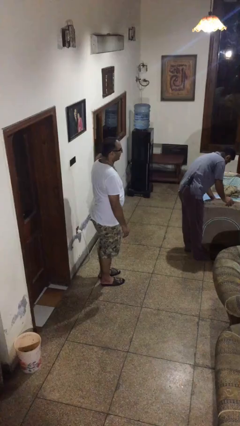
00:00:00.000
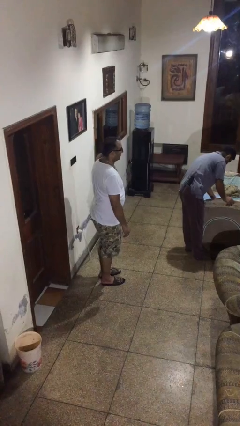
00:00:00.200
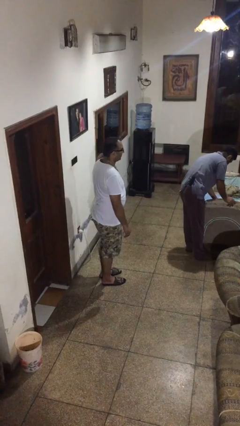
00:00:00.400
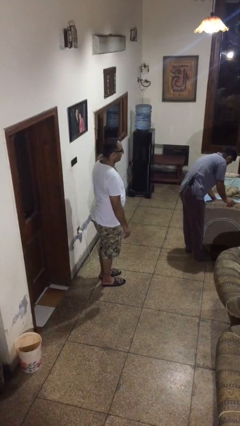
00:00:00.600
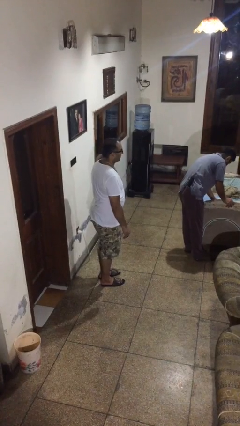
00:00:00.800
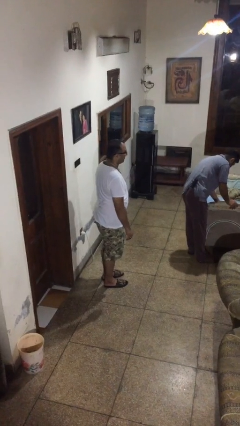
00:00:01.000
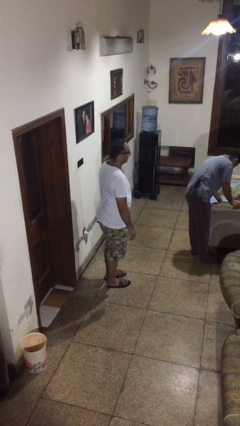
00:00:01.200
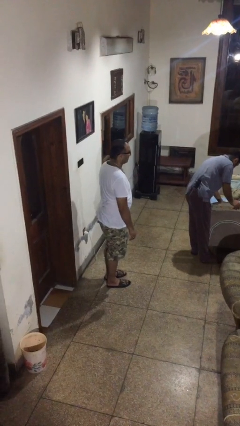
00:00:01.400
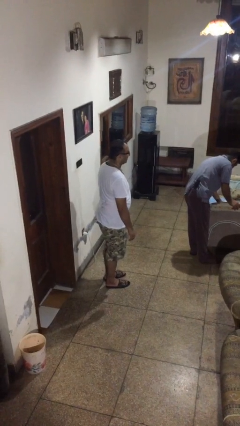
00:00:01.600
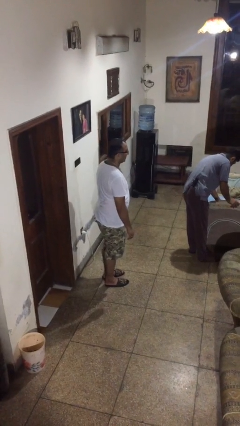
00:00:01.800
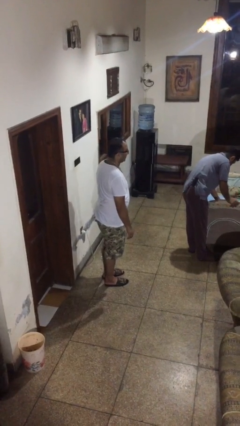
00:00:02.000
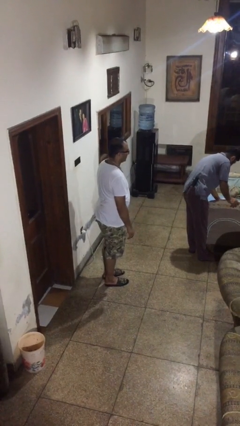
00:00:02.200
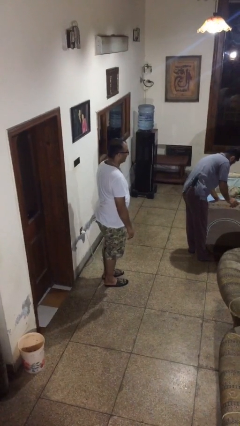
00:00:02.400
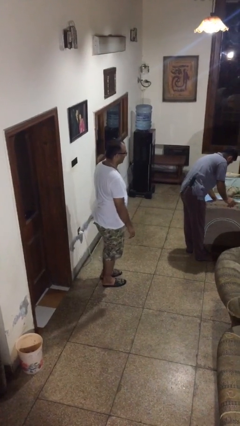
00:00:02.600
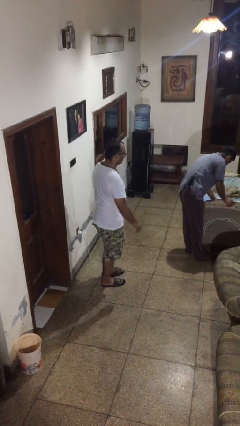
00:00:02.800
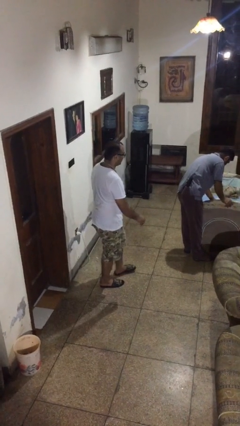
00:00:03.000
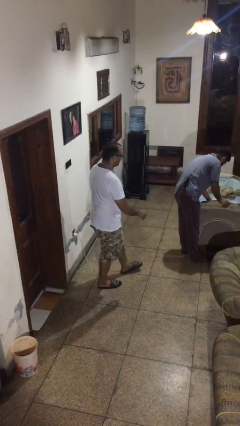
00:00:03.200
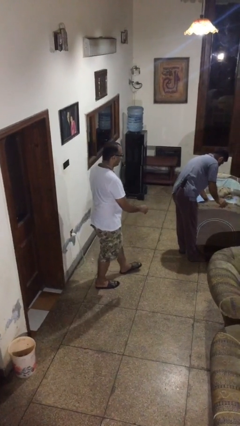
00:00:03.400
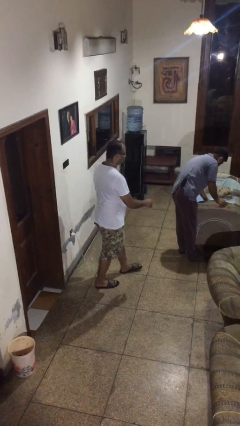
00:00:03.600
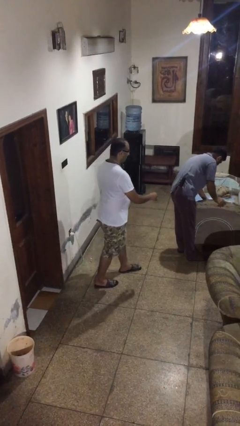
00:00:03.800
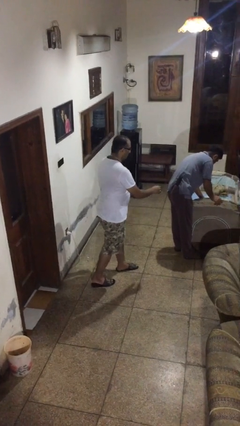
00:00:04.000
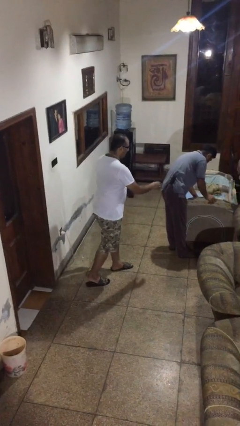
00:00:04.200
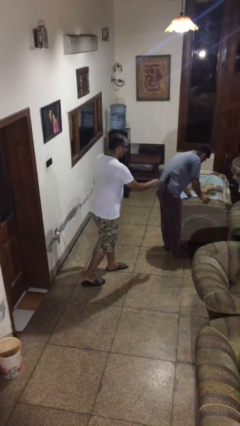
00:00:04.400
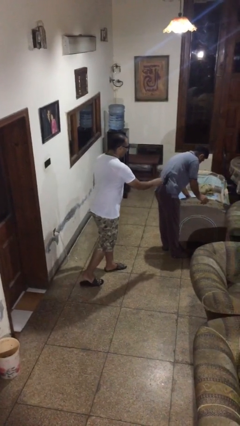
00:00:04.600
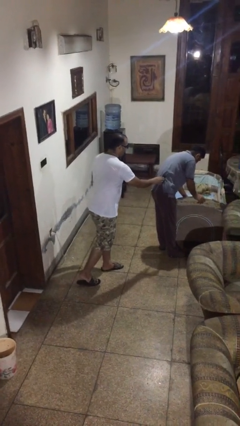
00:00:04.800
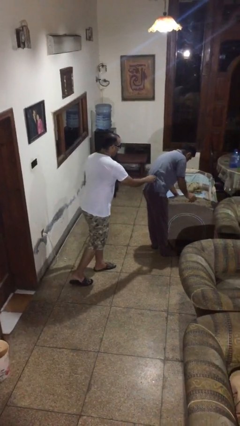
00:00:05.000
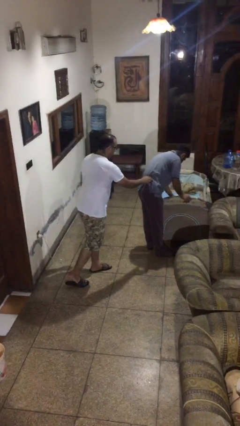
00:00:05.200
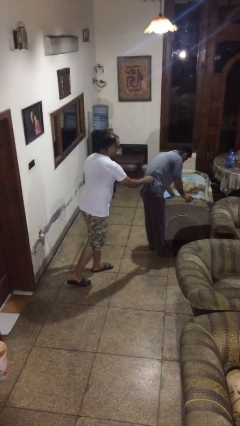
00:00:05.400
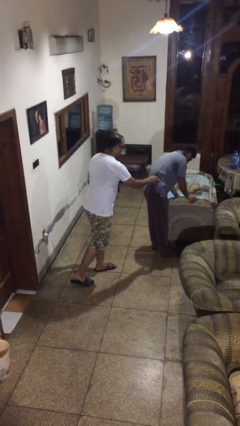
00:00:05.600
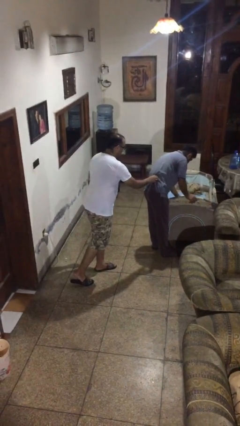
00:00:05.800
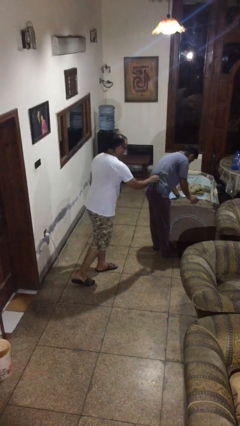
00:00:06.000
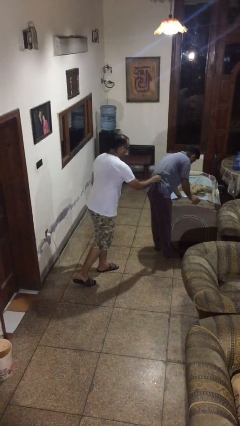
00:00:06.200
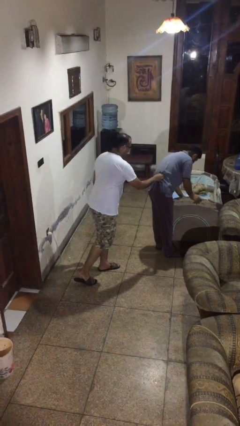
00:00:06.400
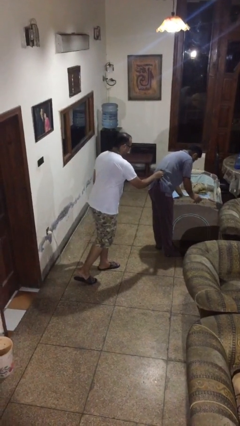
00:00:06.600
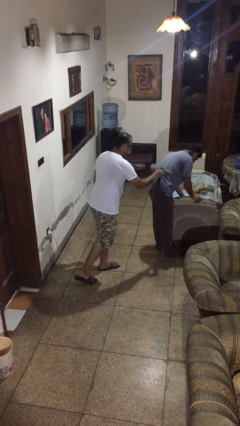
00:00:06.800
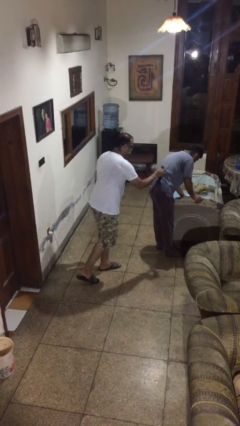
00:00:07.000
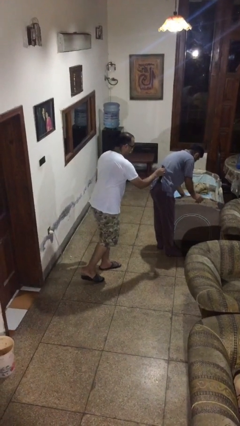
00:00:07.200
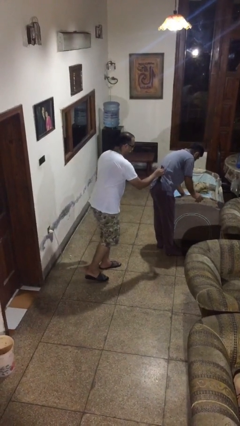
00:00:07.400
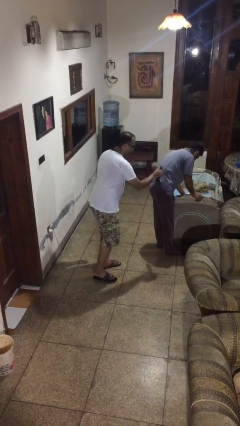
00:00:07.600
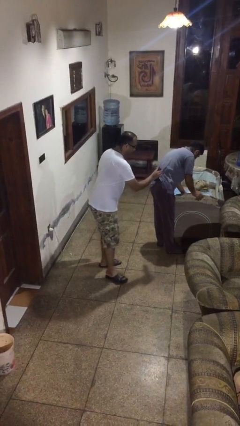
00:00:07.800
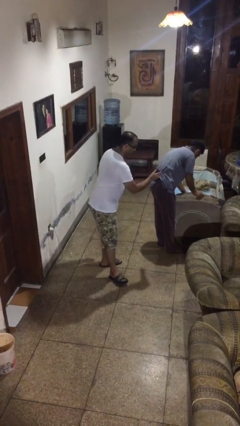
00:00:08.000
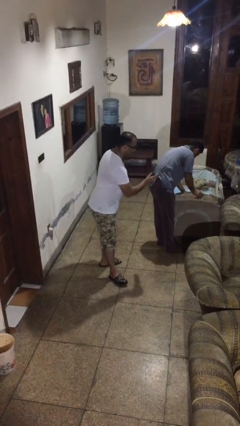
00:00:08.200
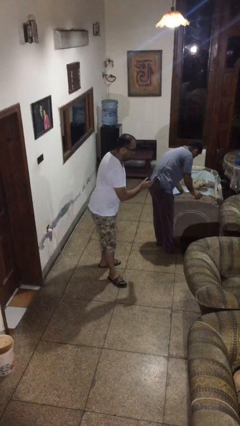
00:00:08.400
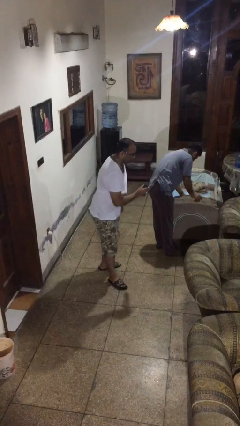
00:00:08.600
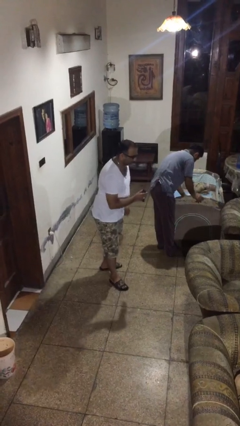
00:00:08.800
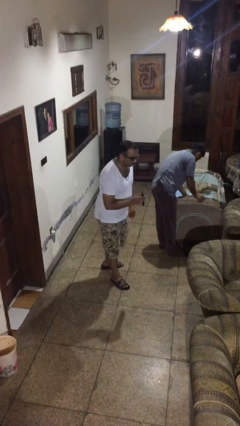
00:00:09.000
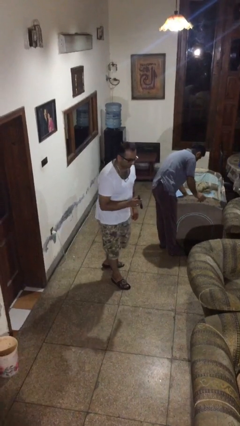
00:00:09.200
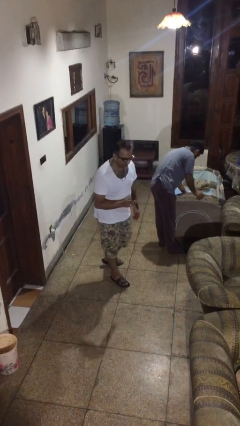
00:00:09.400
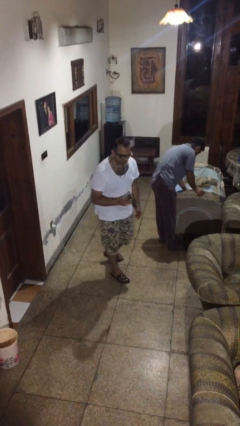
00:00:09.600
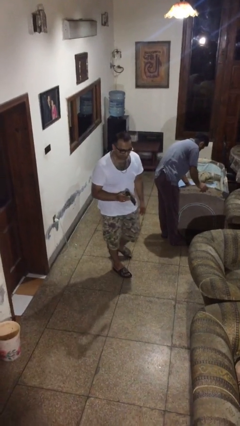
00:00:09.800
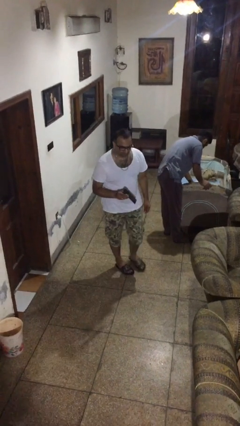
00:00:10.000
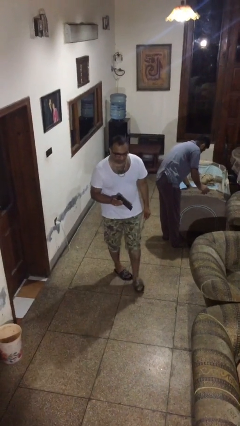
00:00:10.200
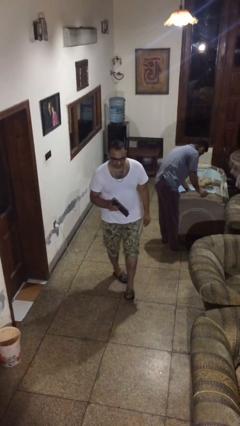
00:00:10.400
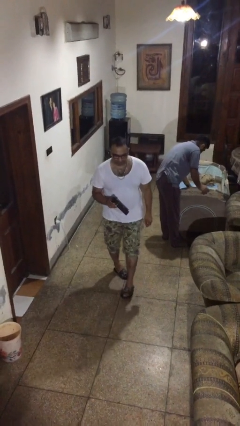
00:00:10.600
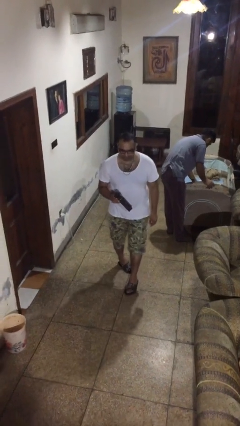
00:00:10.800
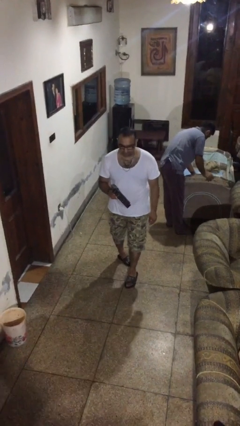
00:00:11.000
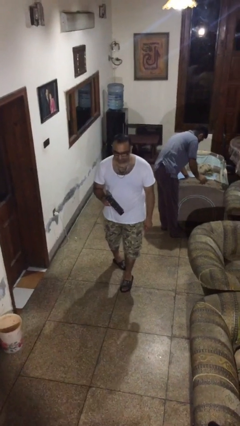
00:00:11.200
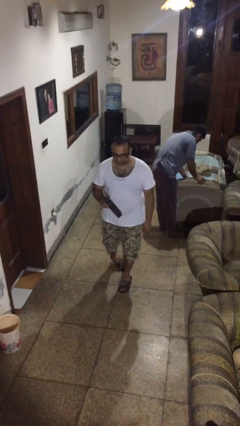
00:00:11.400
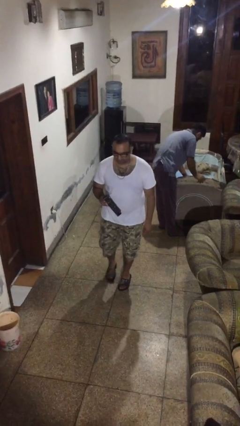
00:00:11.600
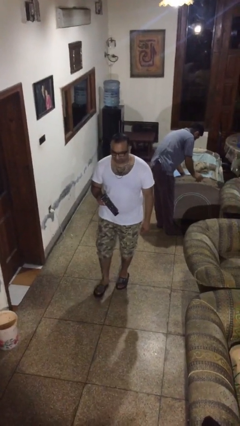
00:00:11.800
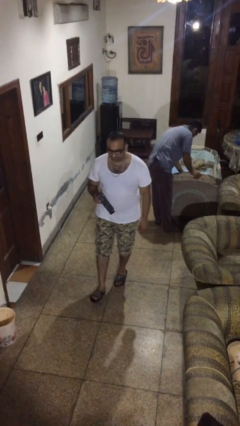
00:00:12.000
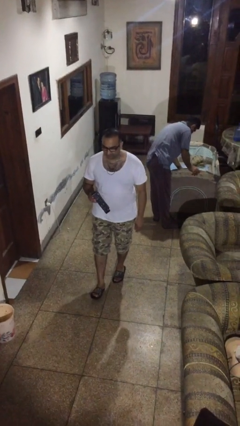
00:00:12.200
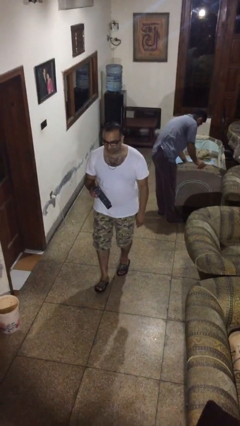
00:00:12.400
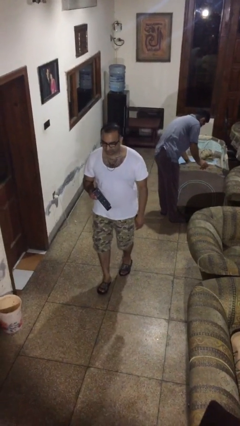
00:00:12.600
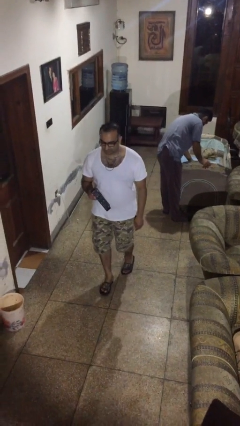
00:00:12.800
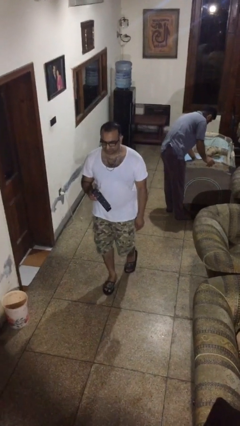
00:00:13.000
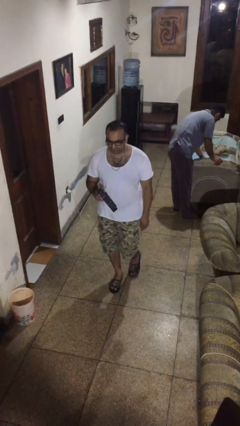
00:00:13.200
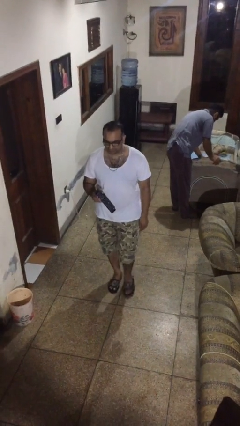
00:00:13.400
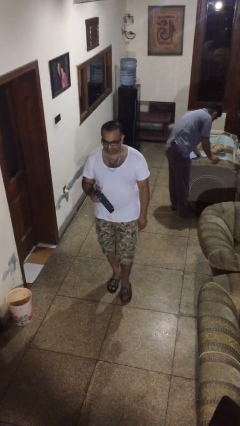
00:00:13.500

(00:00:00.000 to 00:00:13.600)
person steals object from person

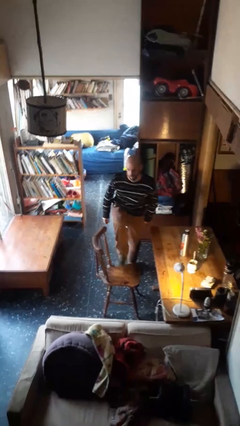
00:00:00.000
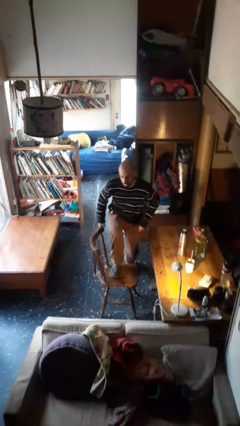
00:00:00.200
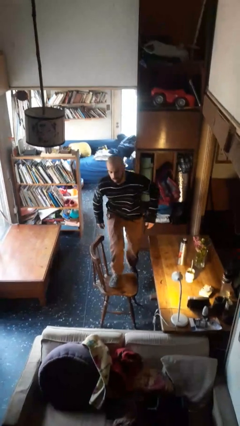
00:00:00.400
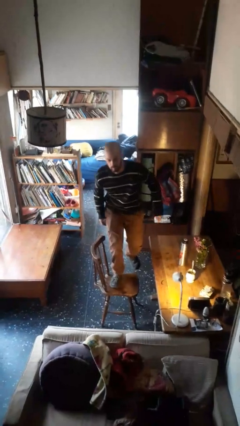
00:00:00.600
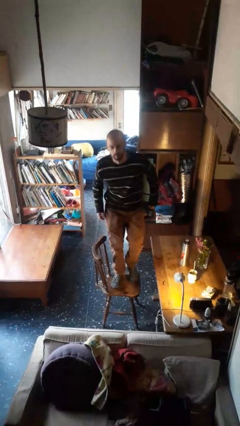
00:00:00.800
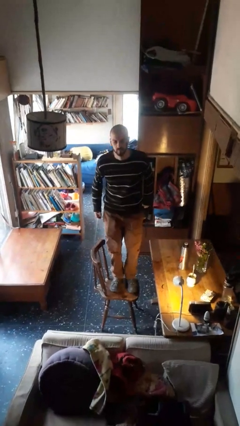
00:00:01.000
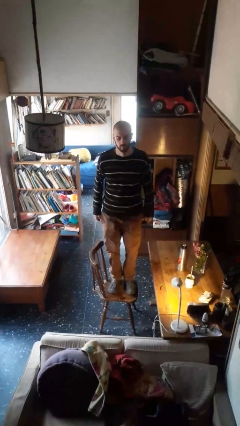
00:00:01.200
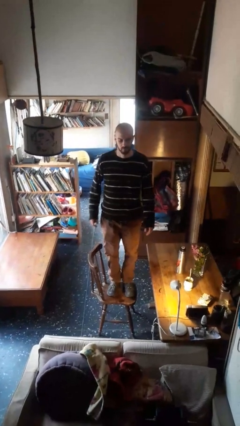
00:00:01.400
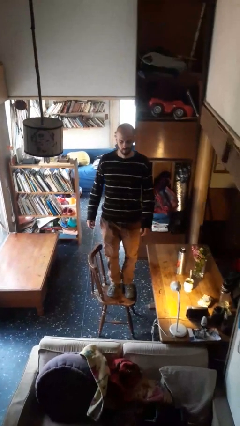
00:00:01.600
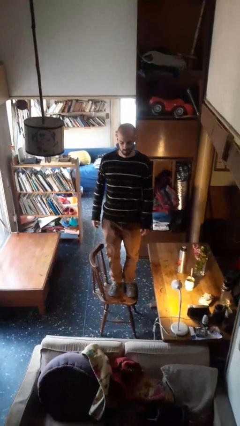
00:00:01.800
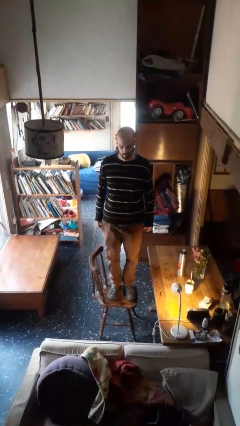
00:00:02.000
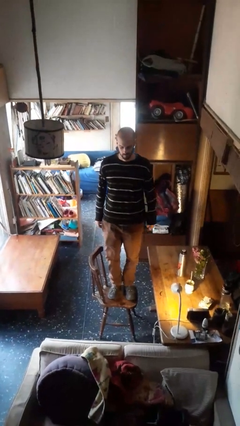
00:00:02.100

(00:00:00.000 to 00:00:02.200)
person climbs on chair

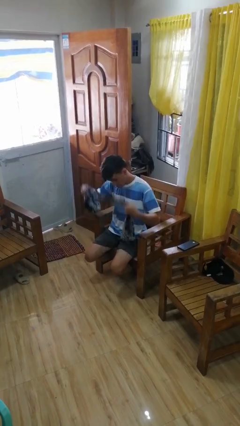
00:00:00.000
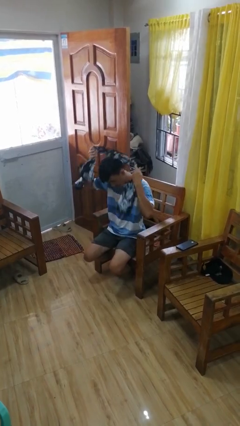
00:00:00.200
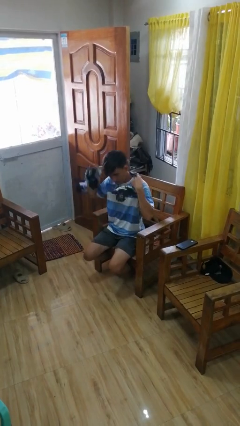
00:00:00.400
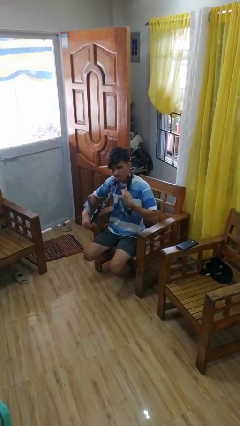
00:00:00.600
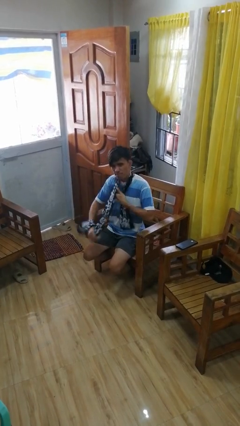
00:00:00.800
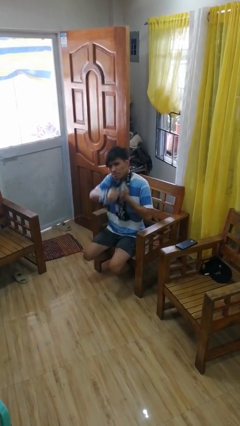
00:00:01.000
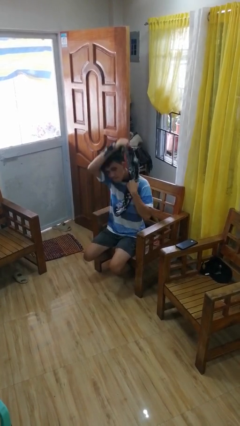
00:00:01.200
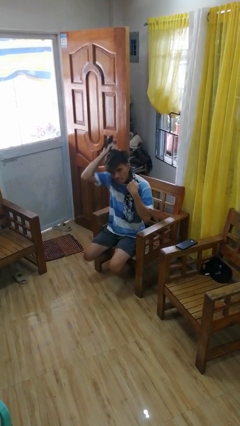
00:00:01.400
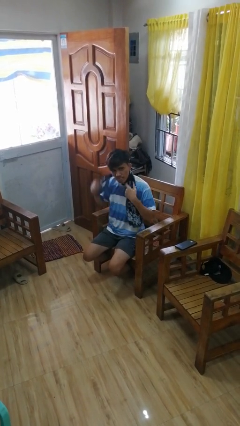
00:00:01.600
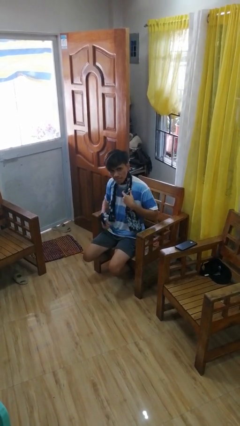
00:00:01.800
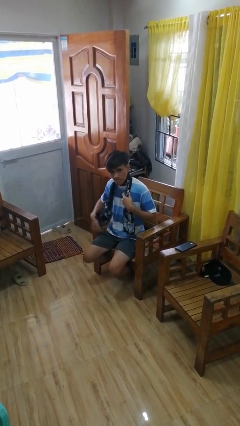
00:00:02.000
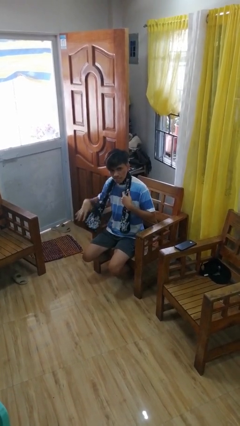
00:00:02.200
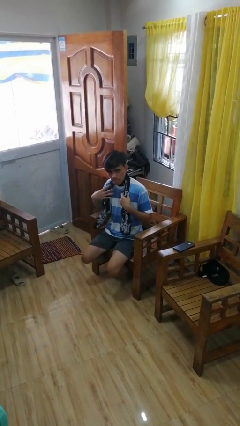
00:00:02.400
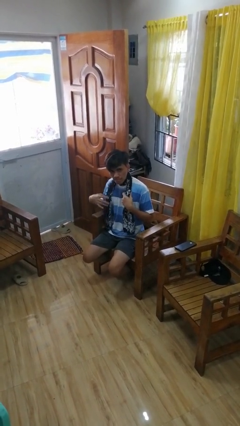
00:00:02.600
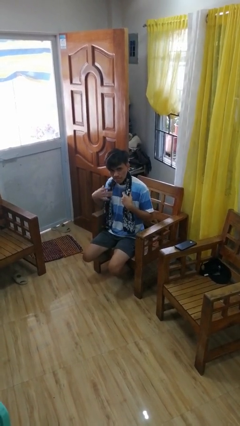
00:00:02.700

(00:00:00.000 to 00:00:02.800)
person puts on scarf
